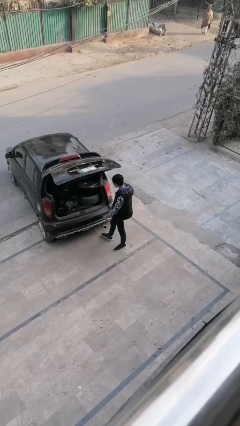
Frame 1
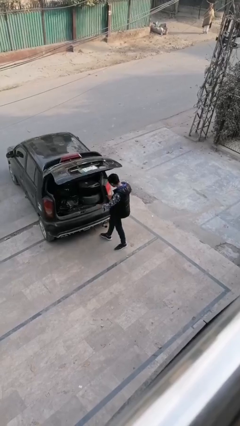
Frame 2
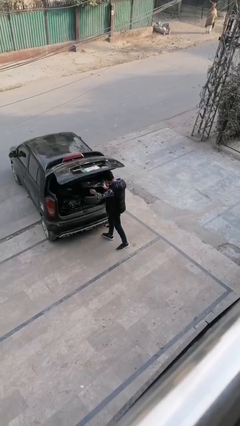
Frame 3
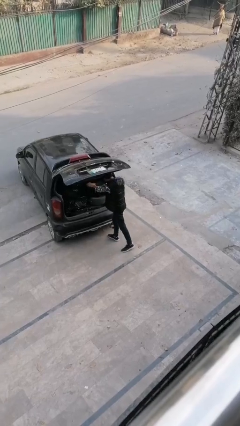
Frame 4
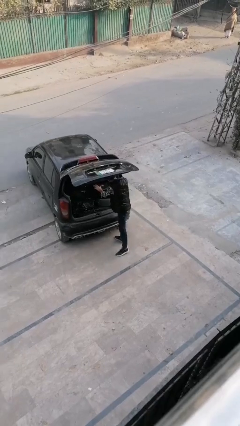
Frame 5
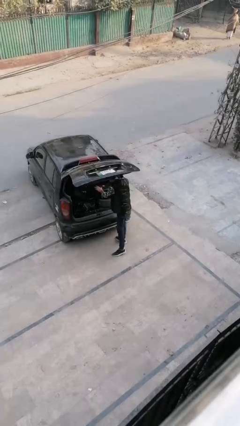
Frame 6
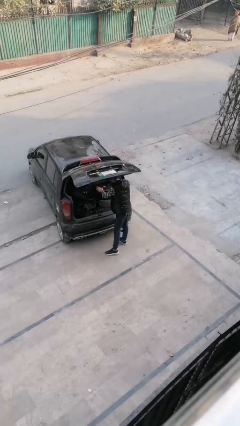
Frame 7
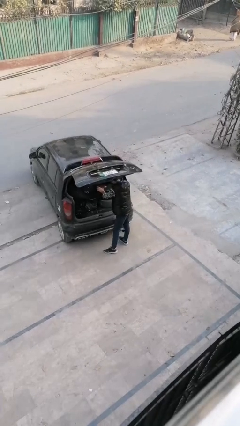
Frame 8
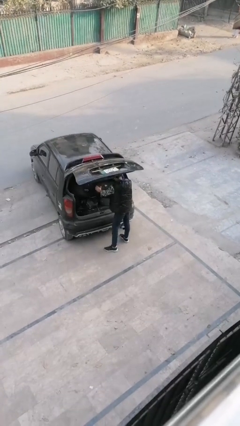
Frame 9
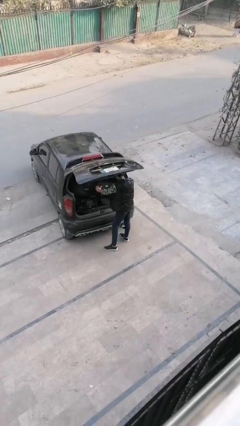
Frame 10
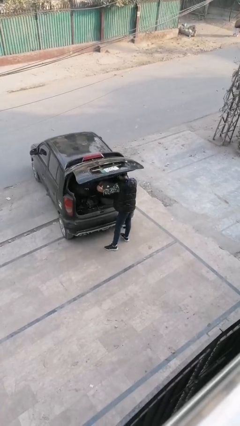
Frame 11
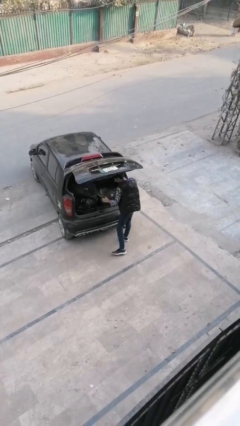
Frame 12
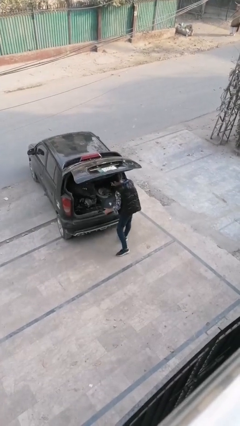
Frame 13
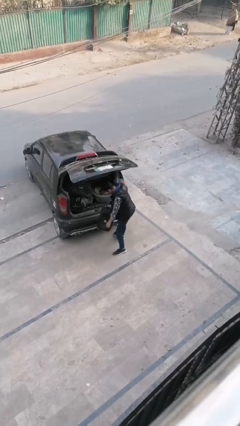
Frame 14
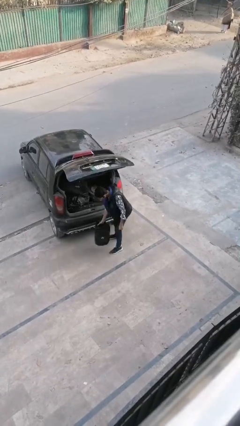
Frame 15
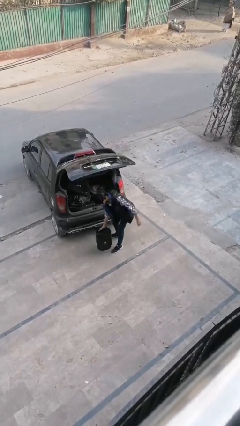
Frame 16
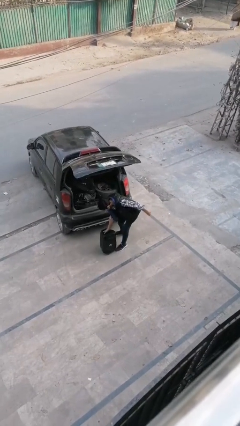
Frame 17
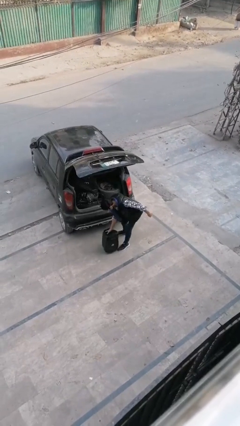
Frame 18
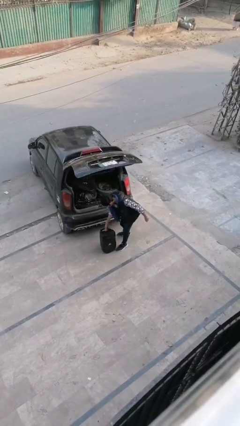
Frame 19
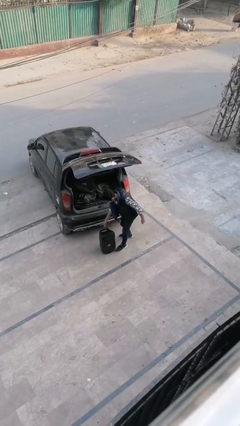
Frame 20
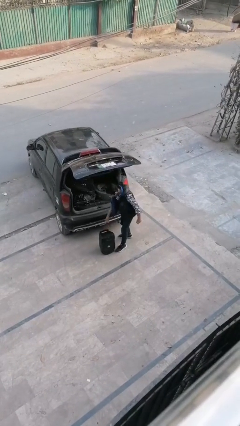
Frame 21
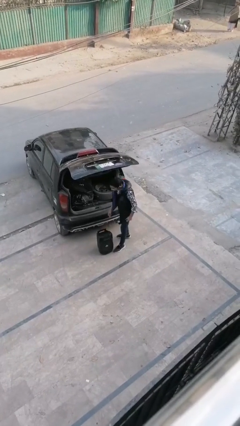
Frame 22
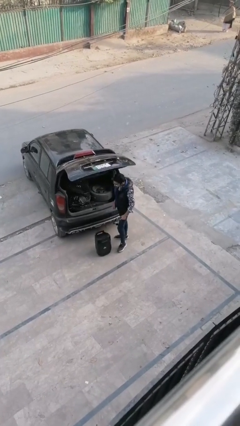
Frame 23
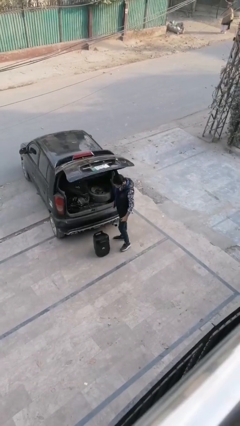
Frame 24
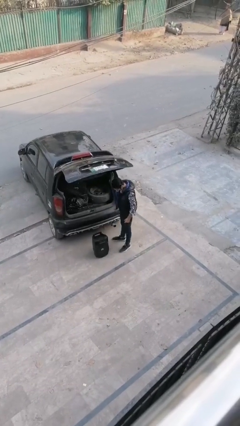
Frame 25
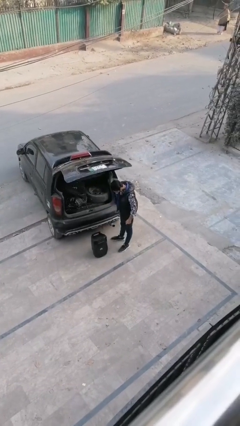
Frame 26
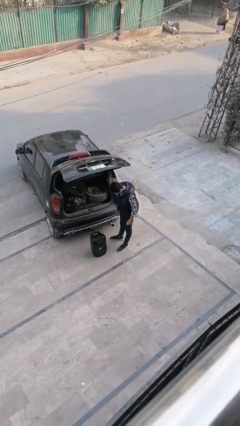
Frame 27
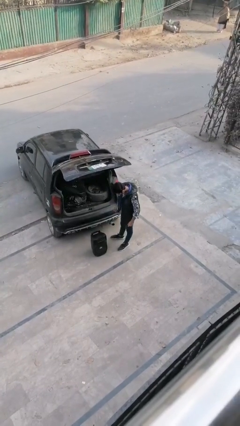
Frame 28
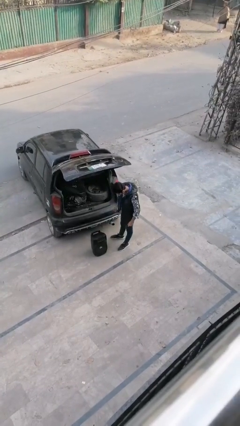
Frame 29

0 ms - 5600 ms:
person unloads car

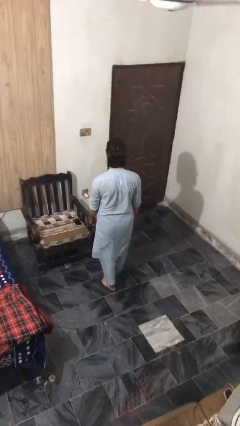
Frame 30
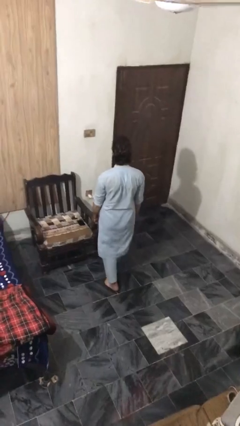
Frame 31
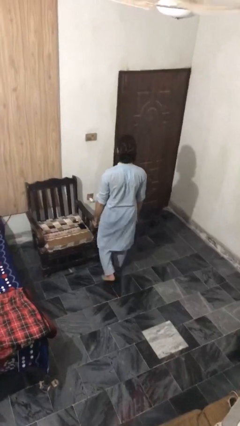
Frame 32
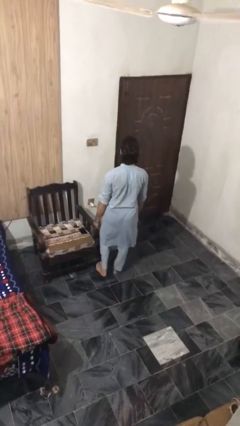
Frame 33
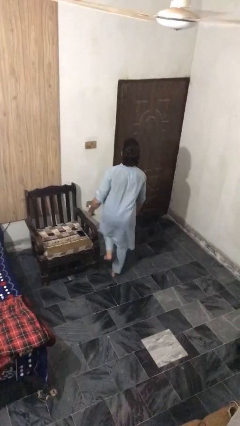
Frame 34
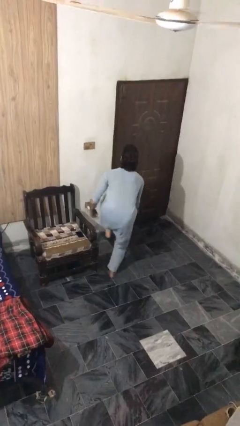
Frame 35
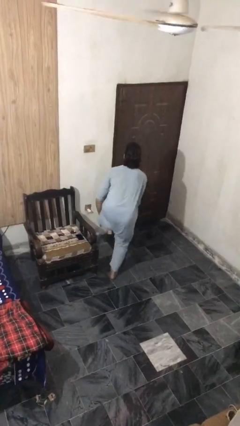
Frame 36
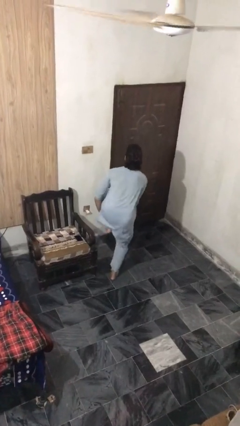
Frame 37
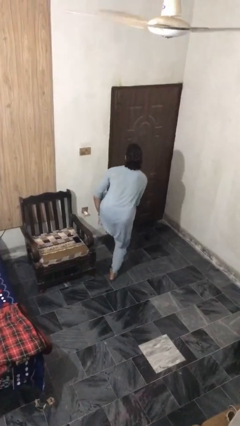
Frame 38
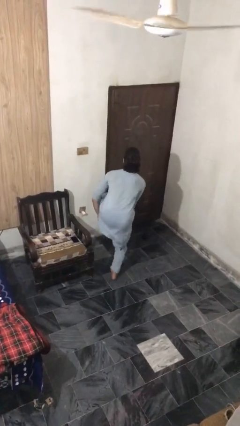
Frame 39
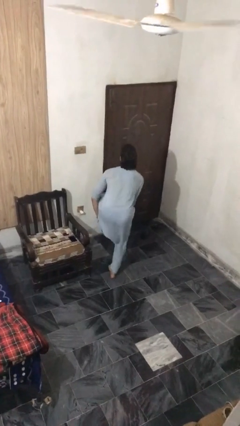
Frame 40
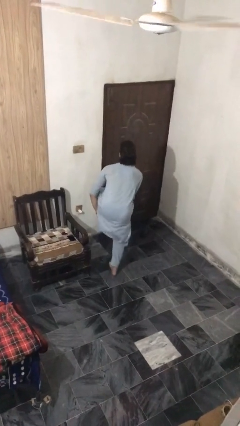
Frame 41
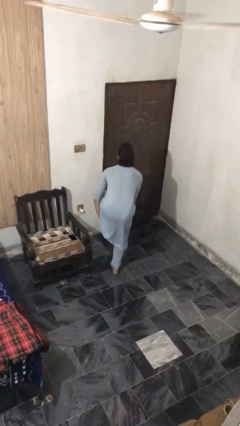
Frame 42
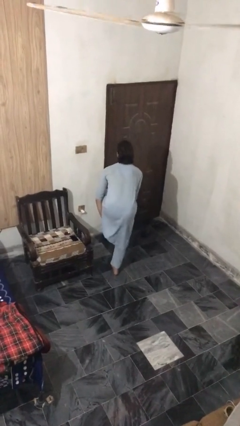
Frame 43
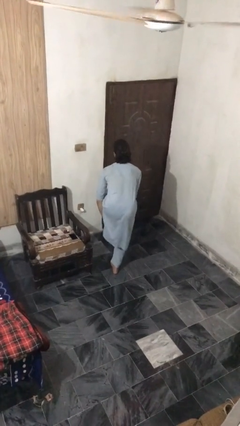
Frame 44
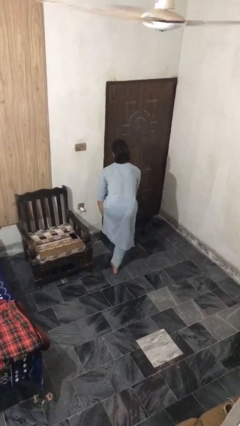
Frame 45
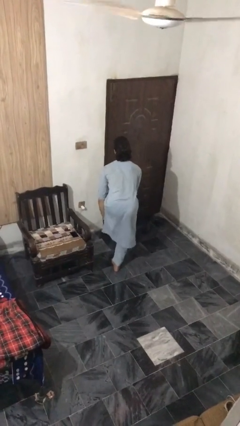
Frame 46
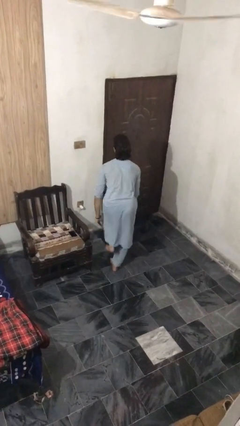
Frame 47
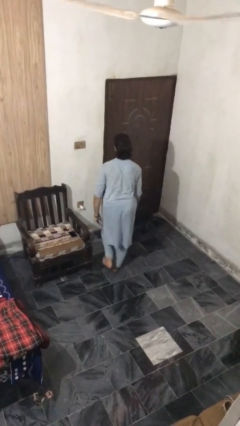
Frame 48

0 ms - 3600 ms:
person stubs toe

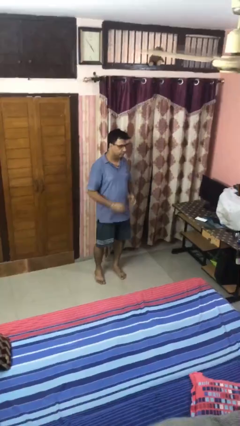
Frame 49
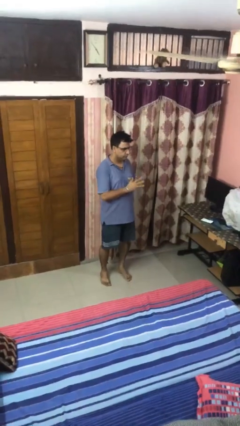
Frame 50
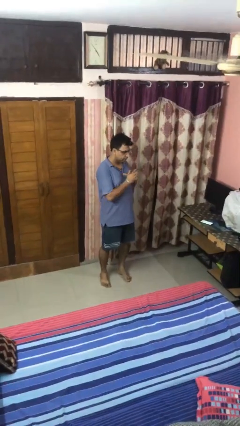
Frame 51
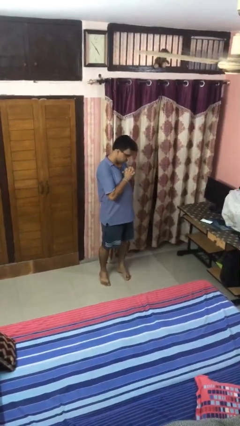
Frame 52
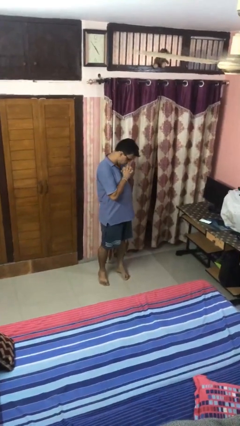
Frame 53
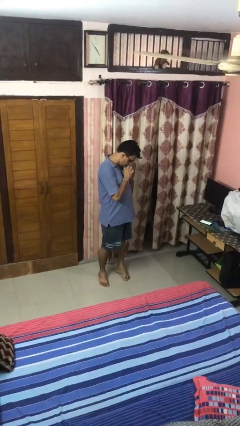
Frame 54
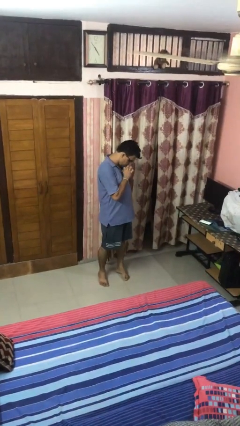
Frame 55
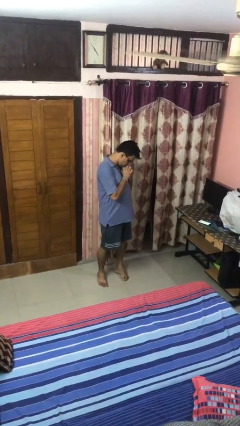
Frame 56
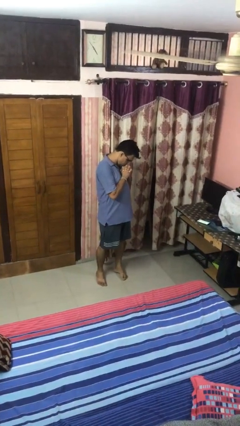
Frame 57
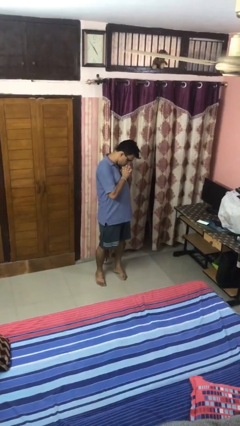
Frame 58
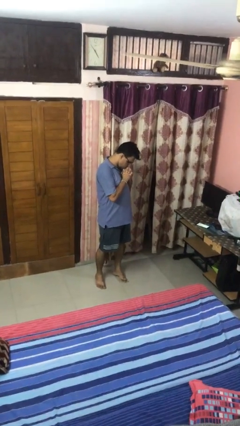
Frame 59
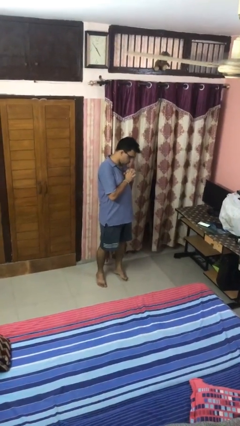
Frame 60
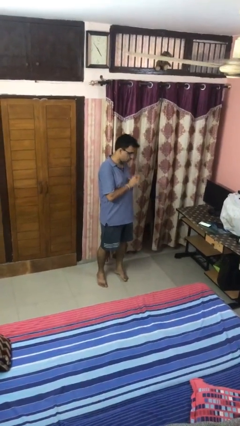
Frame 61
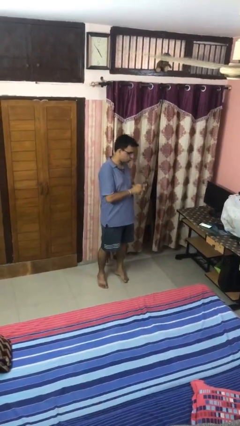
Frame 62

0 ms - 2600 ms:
person prays

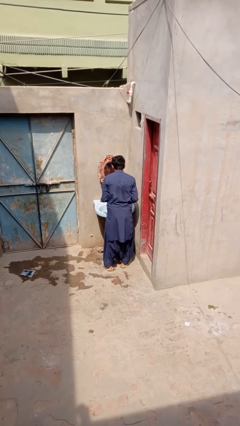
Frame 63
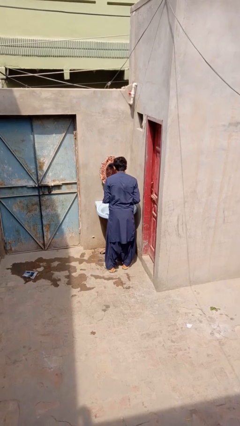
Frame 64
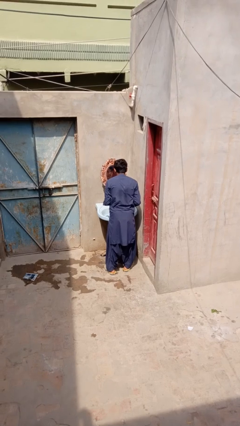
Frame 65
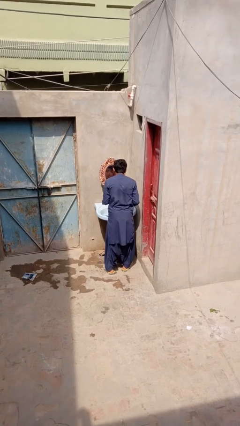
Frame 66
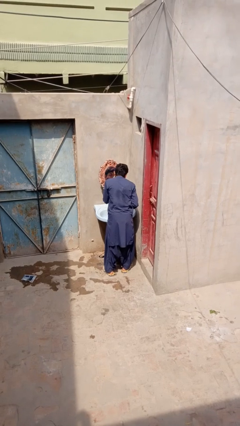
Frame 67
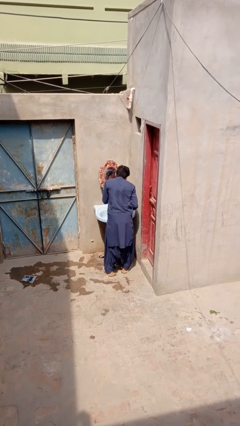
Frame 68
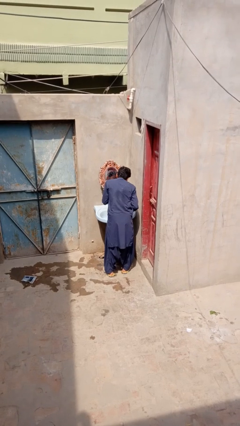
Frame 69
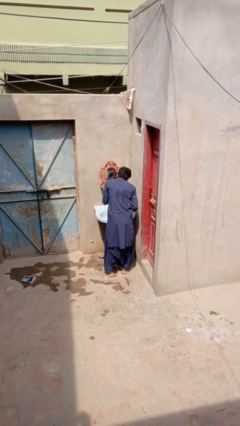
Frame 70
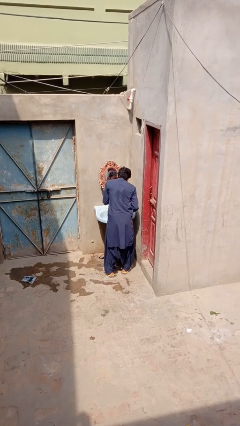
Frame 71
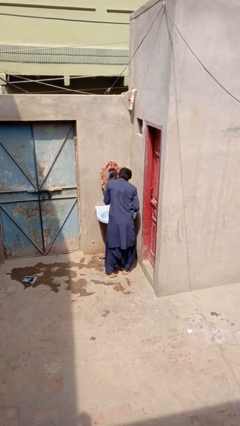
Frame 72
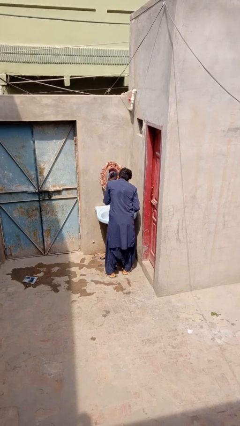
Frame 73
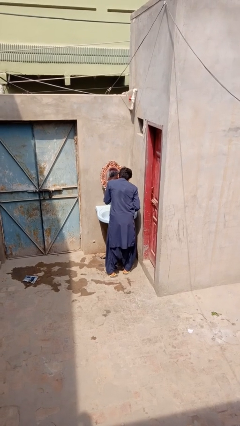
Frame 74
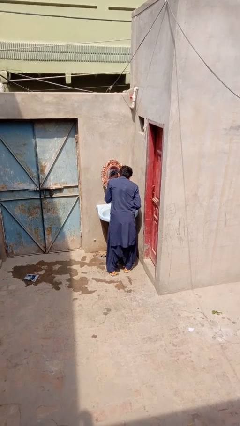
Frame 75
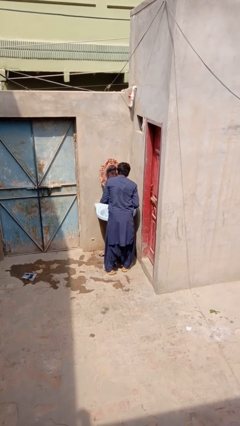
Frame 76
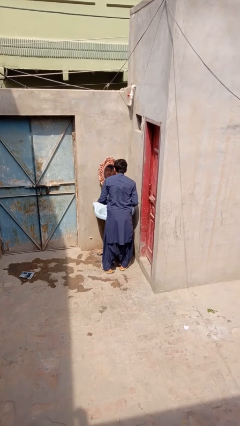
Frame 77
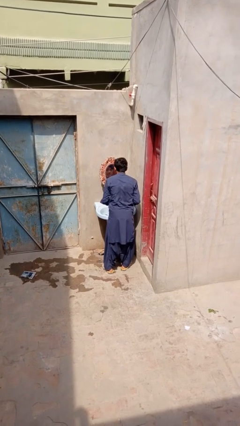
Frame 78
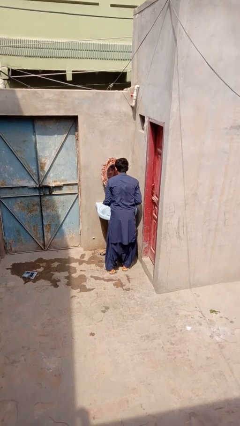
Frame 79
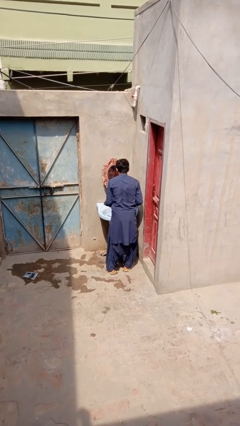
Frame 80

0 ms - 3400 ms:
person applies shaving cream

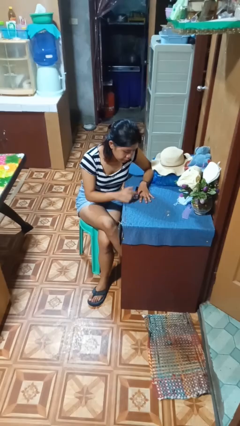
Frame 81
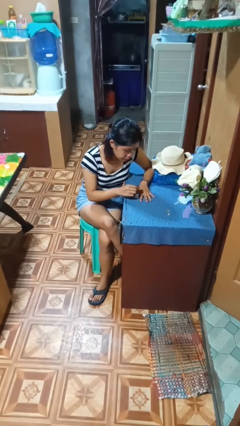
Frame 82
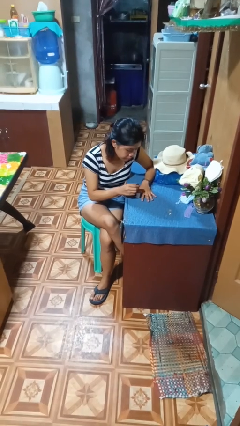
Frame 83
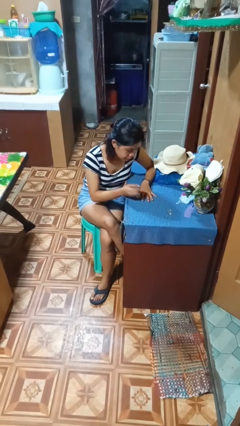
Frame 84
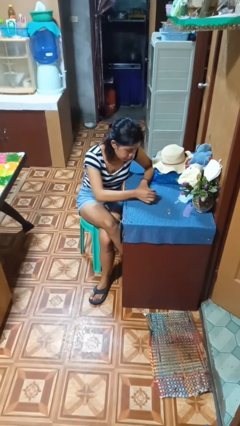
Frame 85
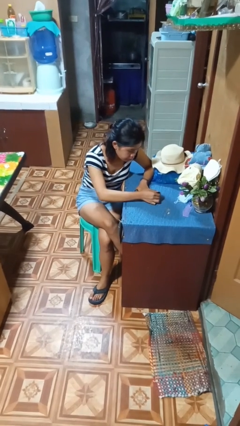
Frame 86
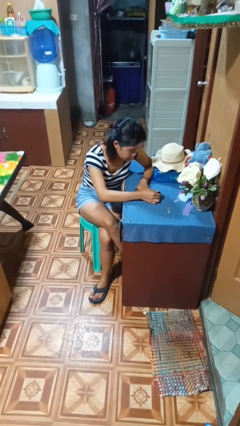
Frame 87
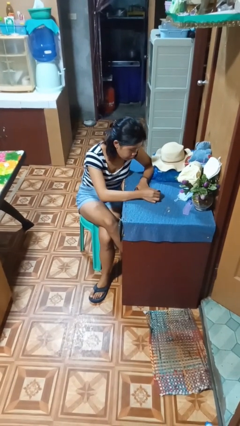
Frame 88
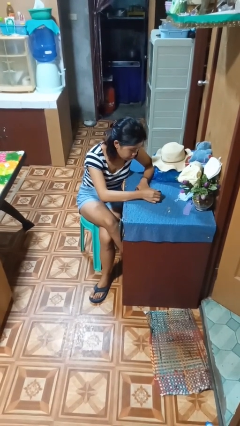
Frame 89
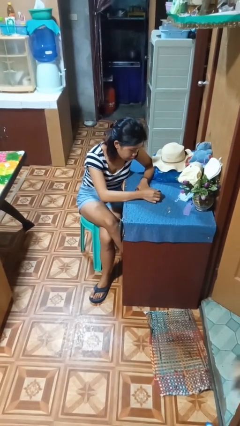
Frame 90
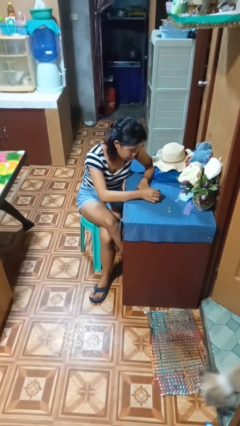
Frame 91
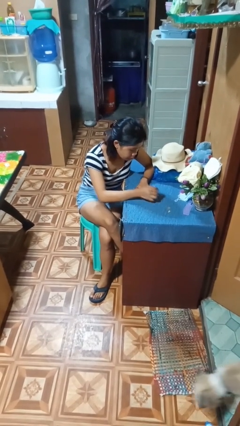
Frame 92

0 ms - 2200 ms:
person paints fingernails

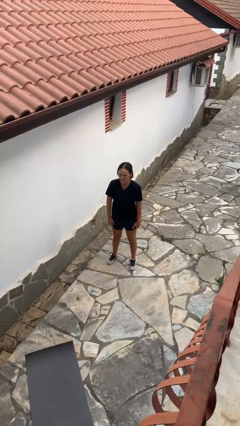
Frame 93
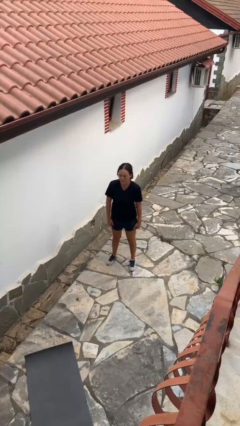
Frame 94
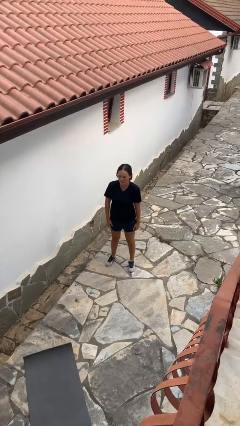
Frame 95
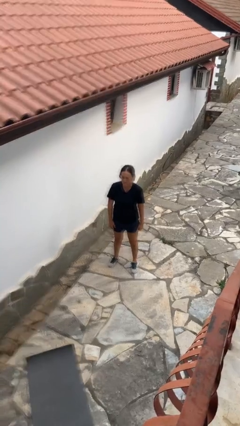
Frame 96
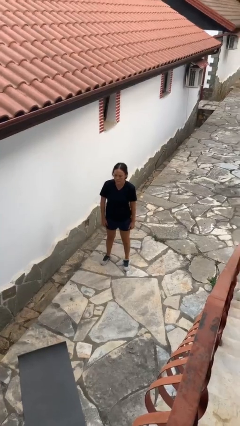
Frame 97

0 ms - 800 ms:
person gestures swipe up
